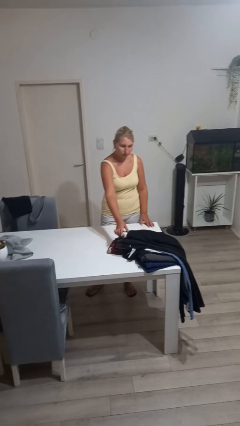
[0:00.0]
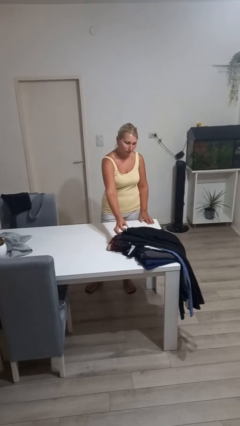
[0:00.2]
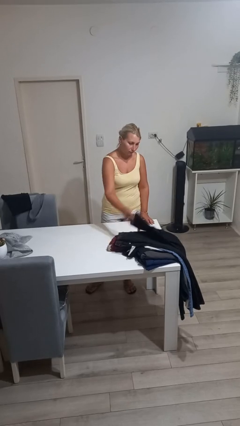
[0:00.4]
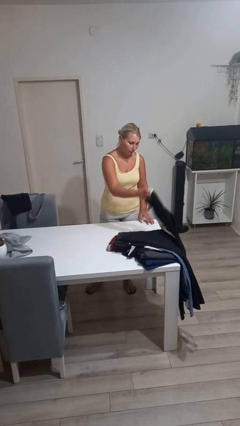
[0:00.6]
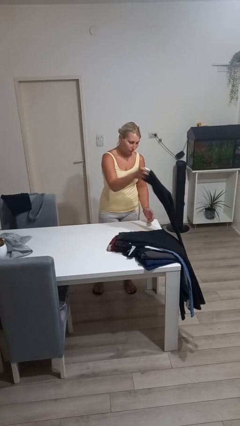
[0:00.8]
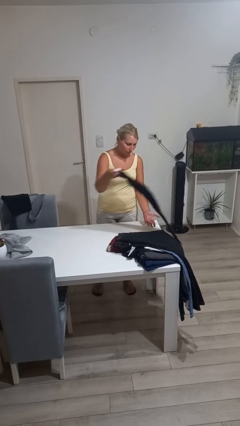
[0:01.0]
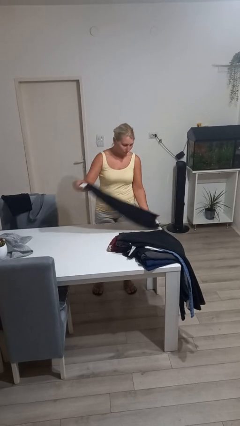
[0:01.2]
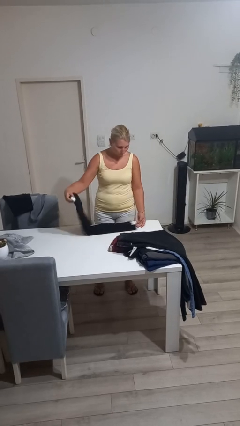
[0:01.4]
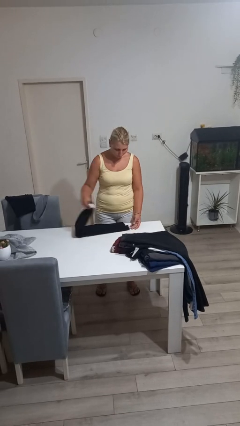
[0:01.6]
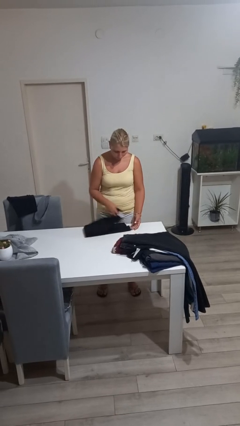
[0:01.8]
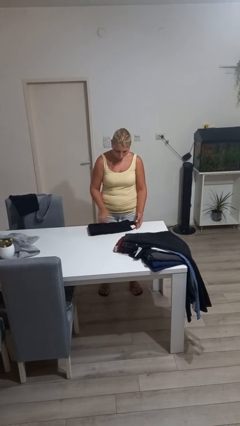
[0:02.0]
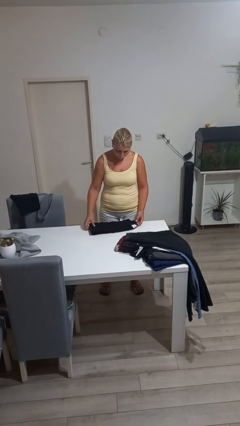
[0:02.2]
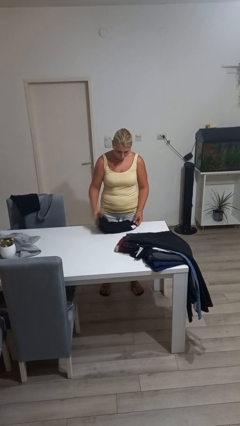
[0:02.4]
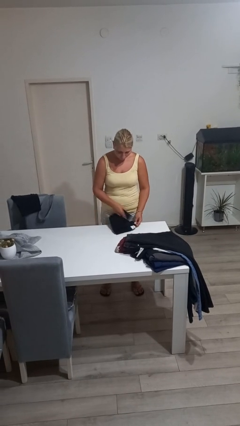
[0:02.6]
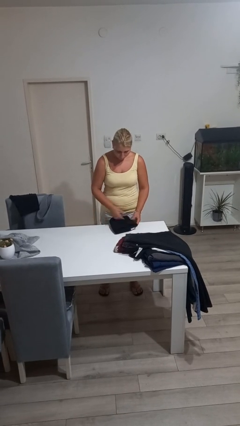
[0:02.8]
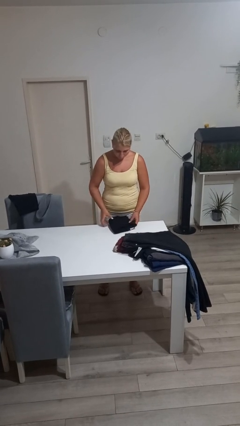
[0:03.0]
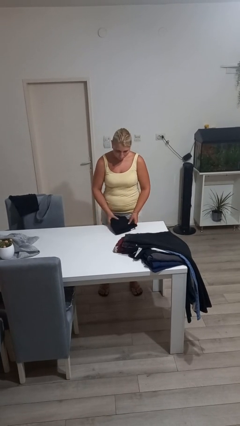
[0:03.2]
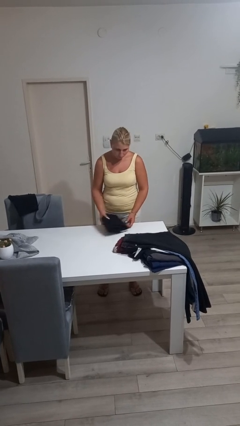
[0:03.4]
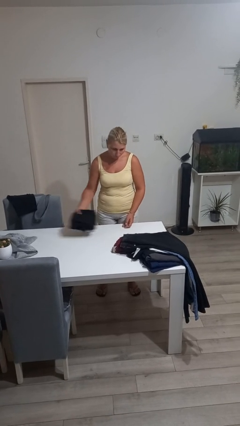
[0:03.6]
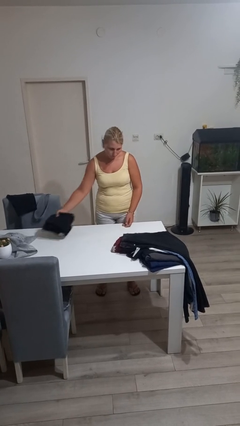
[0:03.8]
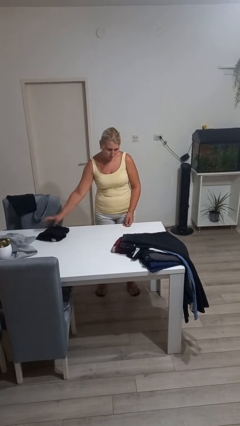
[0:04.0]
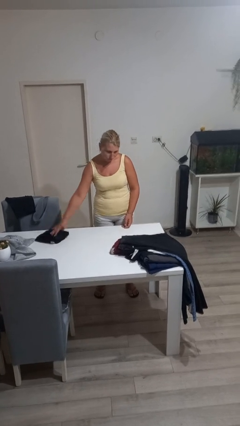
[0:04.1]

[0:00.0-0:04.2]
person folds pants

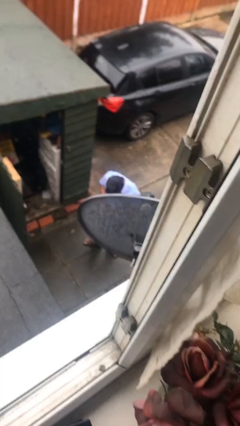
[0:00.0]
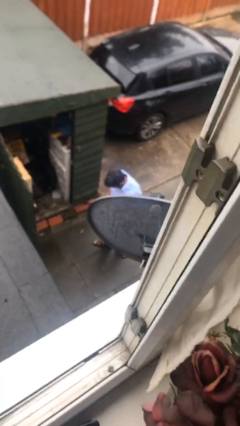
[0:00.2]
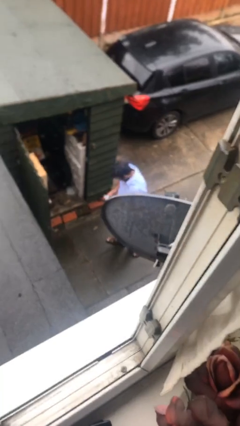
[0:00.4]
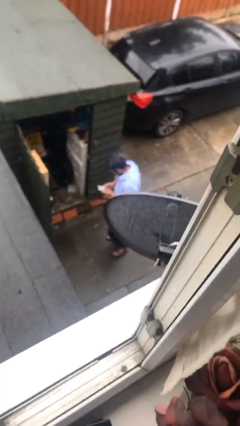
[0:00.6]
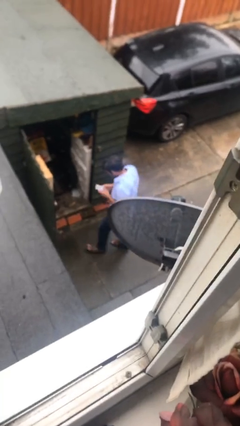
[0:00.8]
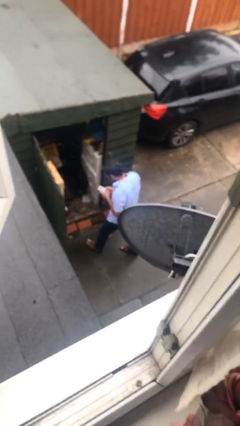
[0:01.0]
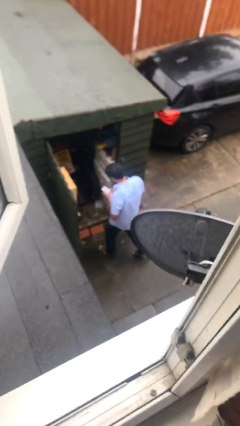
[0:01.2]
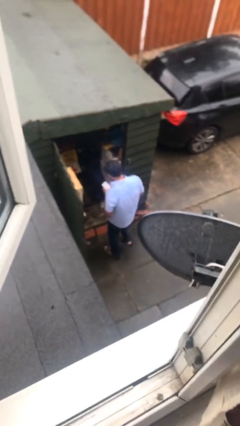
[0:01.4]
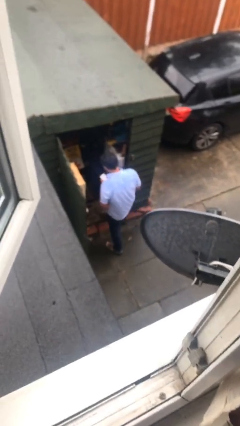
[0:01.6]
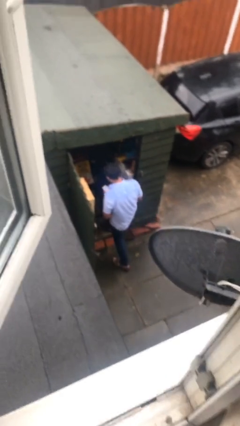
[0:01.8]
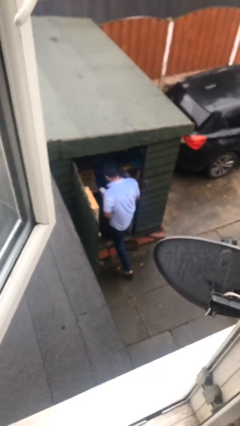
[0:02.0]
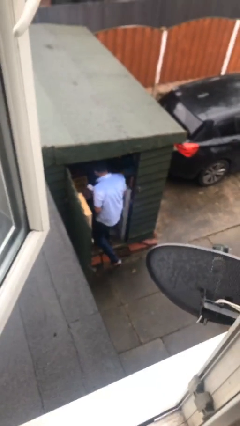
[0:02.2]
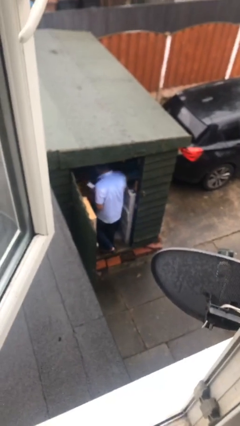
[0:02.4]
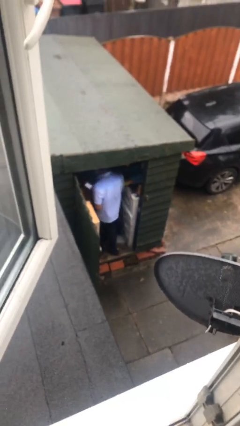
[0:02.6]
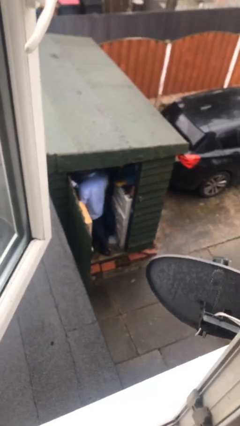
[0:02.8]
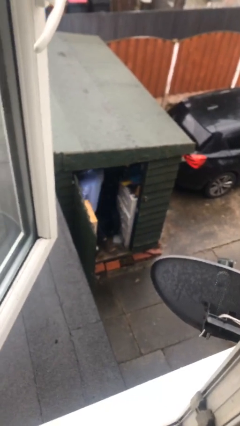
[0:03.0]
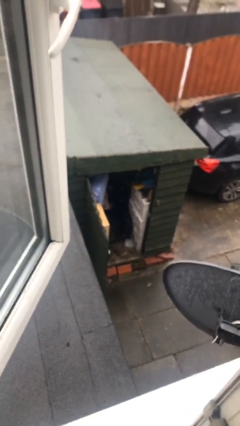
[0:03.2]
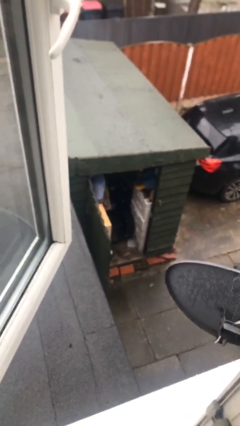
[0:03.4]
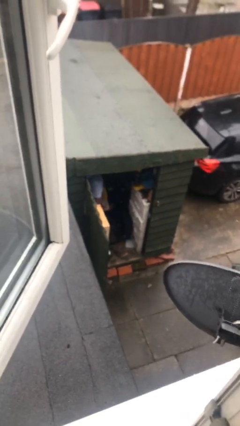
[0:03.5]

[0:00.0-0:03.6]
person exits scene through structure

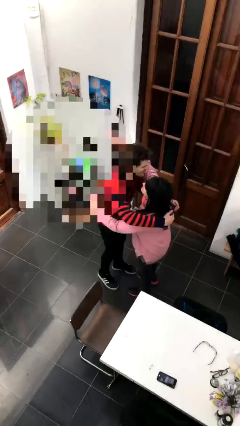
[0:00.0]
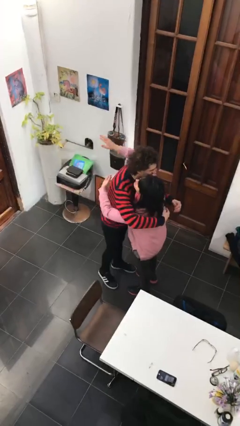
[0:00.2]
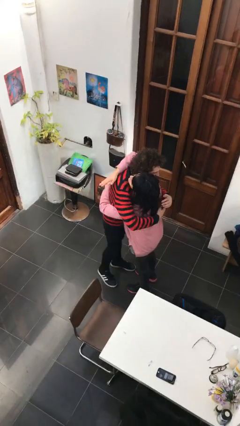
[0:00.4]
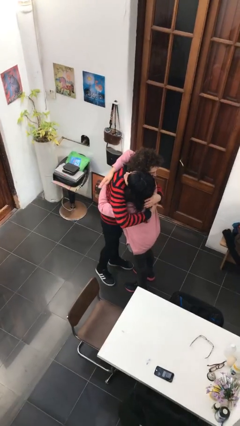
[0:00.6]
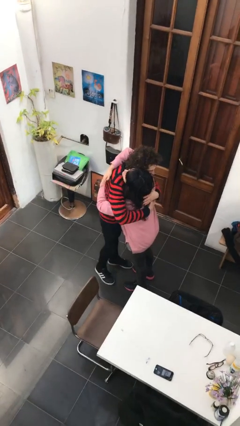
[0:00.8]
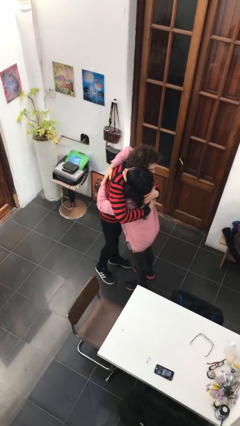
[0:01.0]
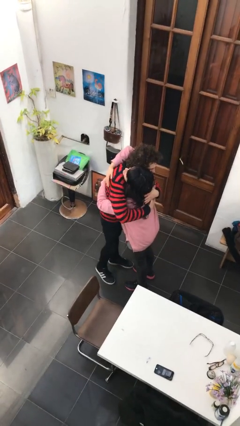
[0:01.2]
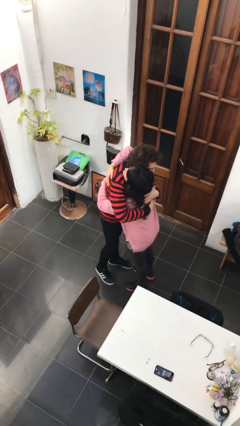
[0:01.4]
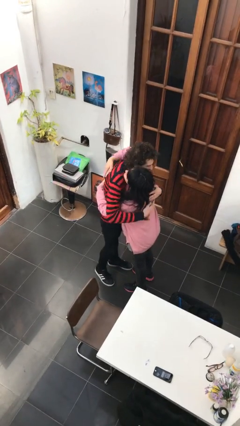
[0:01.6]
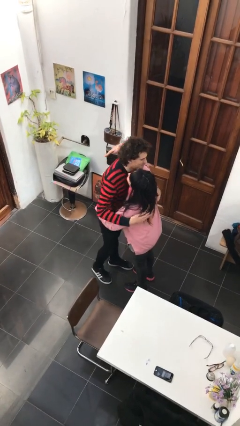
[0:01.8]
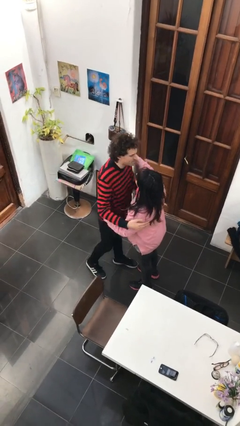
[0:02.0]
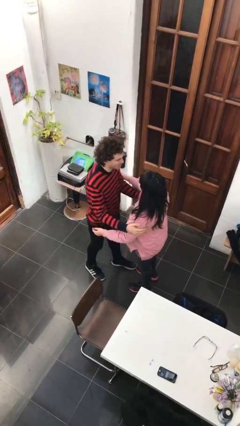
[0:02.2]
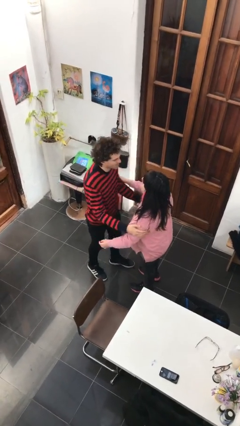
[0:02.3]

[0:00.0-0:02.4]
person embraces person

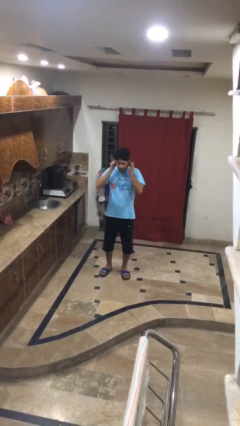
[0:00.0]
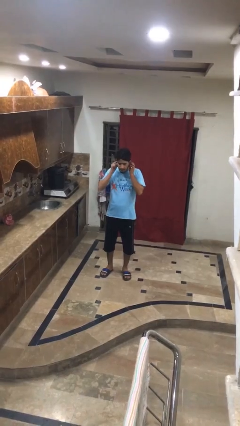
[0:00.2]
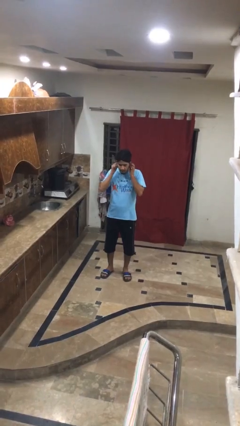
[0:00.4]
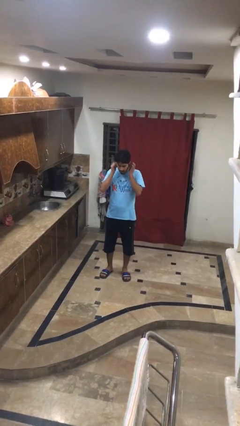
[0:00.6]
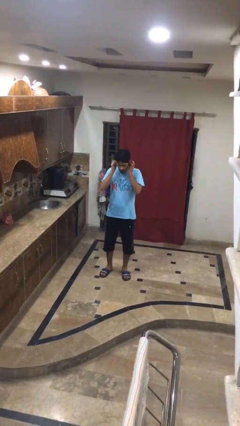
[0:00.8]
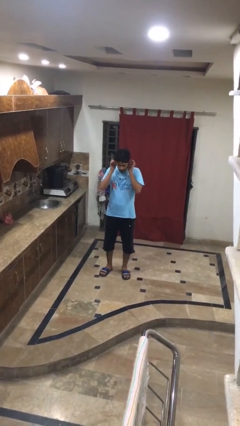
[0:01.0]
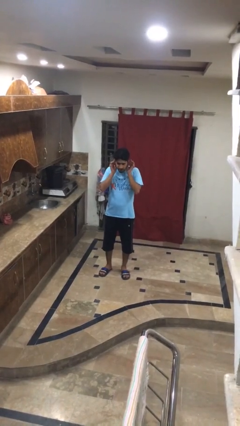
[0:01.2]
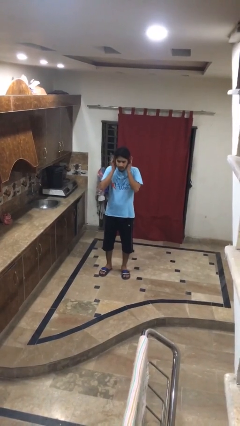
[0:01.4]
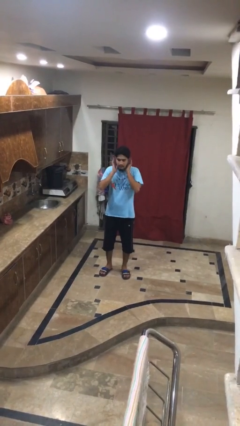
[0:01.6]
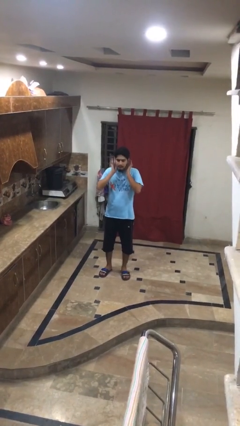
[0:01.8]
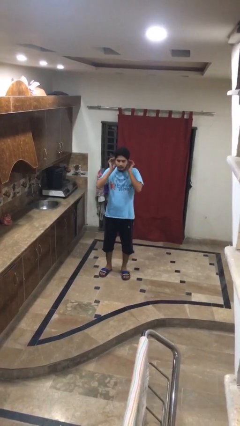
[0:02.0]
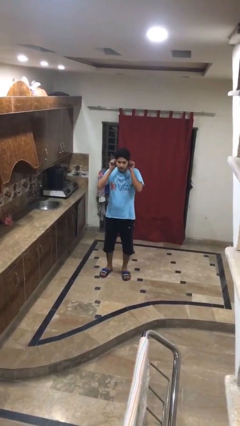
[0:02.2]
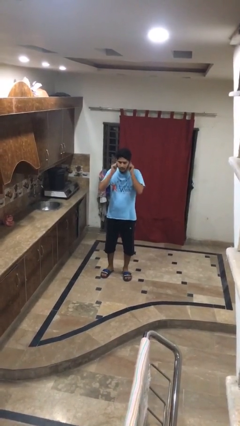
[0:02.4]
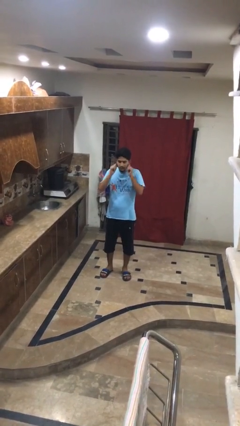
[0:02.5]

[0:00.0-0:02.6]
person touches earlobe

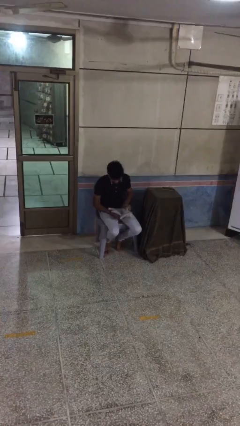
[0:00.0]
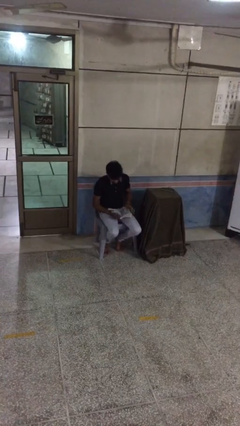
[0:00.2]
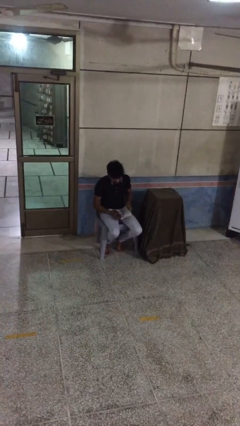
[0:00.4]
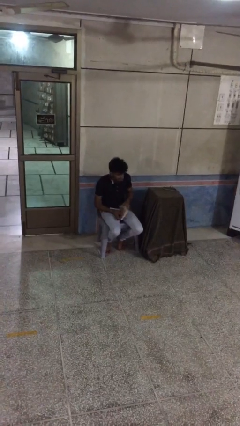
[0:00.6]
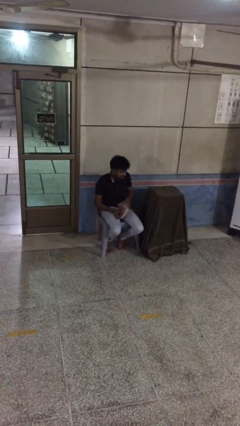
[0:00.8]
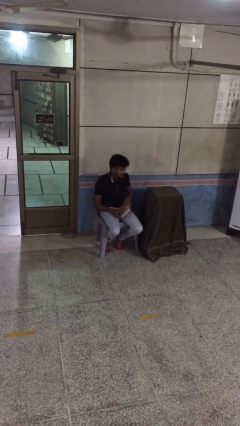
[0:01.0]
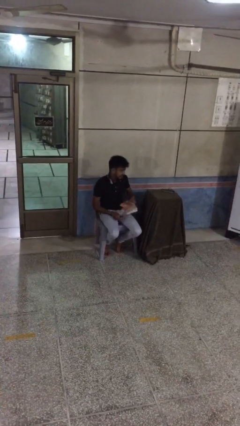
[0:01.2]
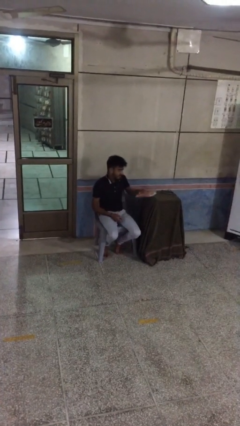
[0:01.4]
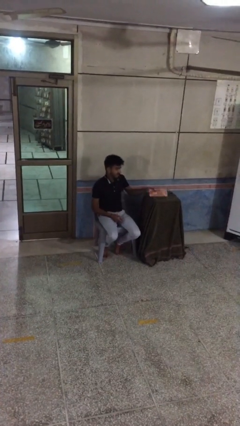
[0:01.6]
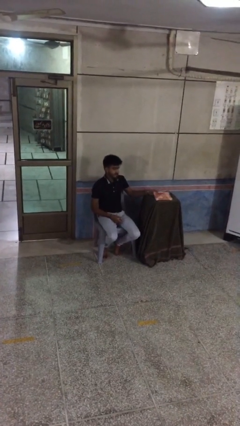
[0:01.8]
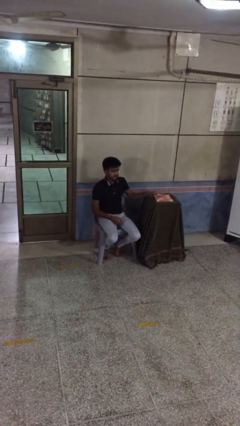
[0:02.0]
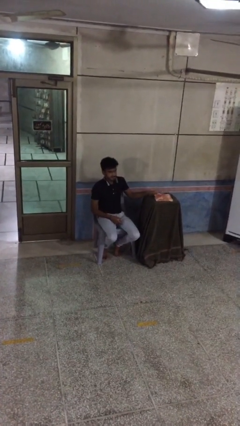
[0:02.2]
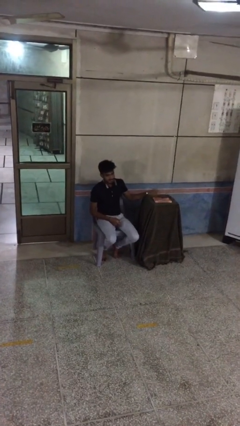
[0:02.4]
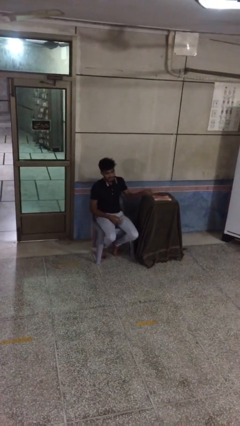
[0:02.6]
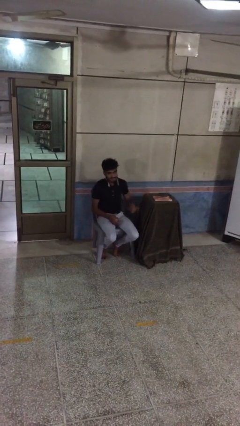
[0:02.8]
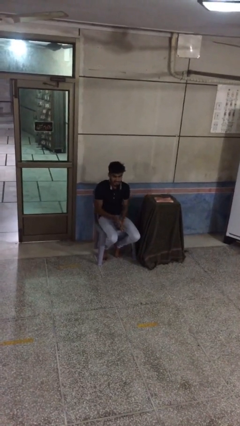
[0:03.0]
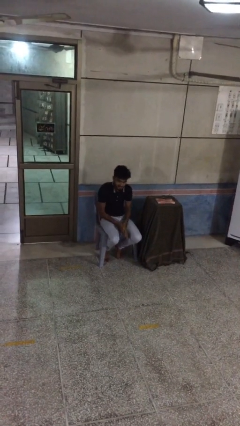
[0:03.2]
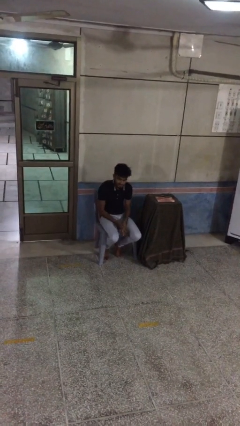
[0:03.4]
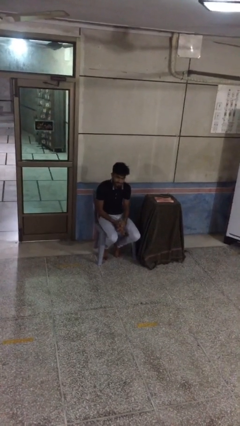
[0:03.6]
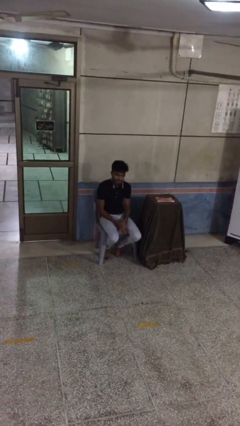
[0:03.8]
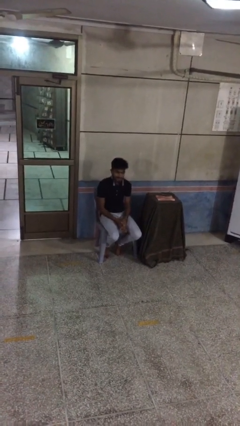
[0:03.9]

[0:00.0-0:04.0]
person puts down object on table

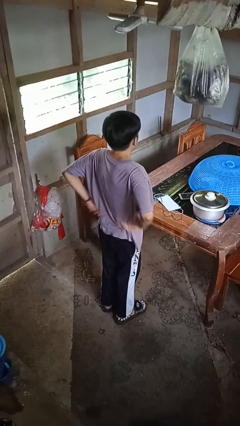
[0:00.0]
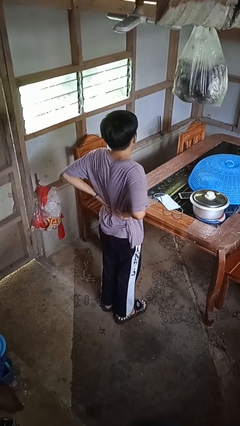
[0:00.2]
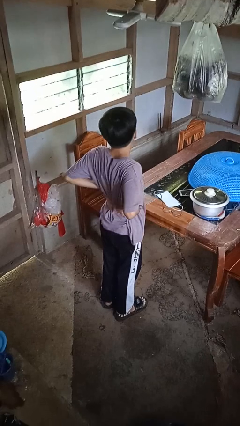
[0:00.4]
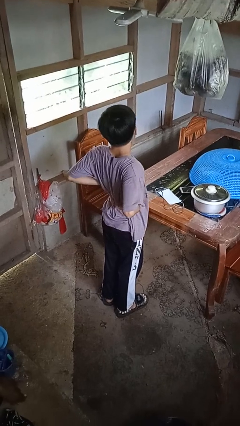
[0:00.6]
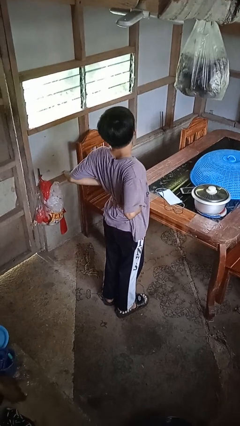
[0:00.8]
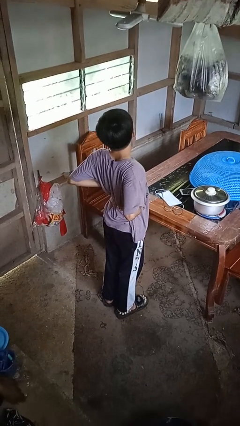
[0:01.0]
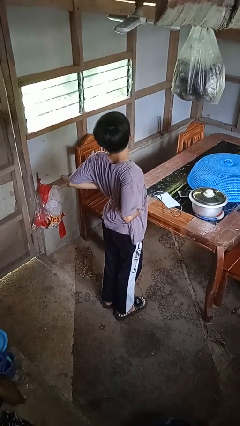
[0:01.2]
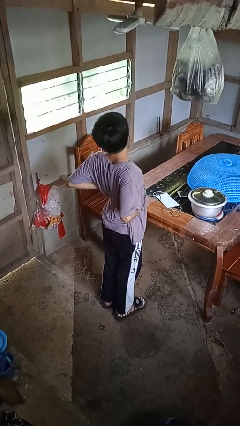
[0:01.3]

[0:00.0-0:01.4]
person stretches back
